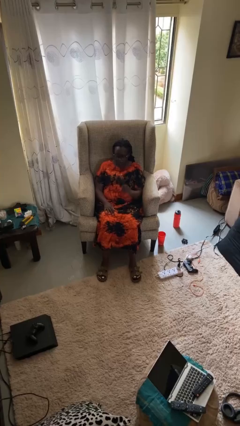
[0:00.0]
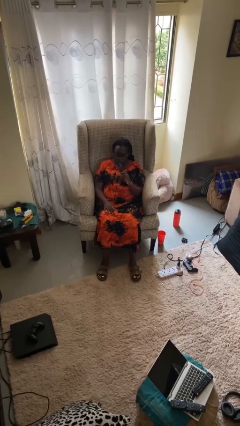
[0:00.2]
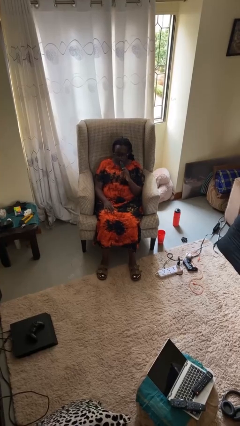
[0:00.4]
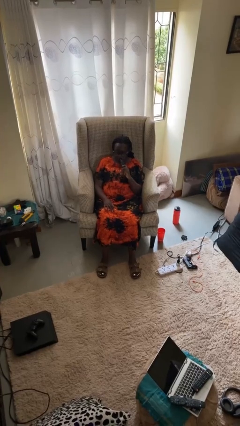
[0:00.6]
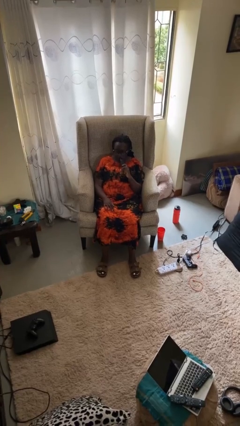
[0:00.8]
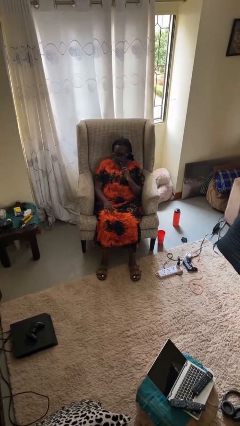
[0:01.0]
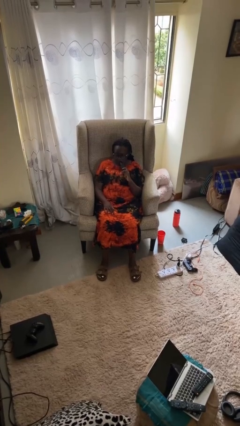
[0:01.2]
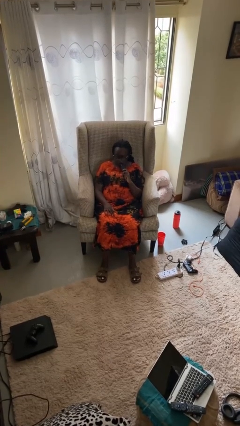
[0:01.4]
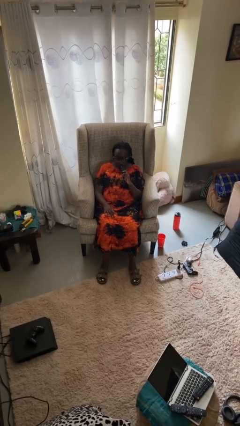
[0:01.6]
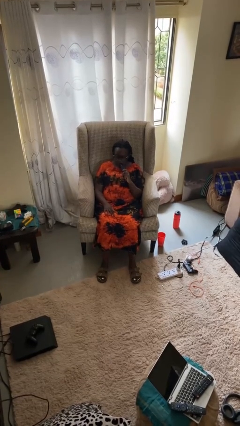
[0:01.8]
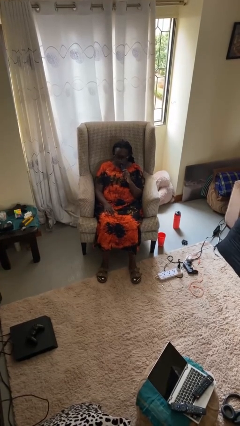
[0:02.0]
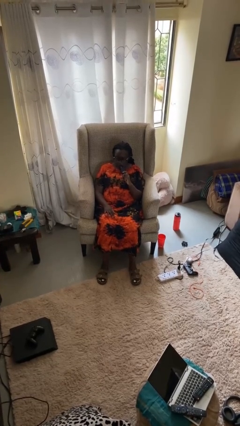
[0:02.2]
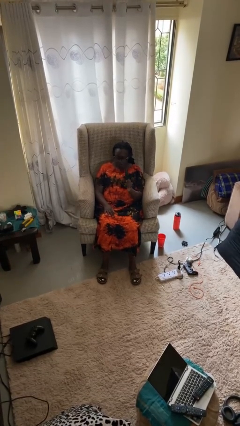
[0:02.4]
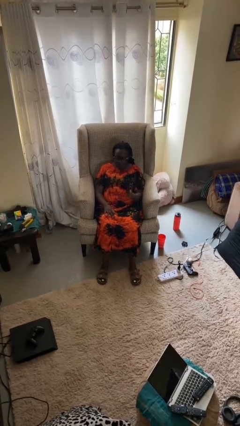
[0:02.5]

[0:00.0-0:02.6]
person vapes

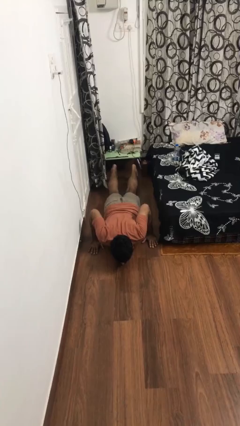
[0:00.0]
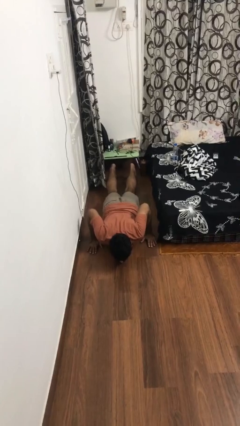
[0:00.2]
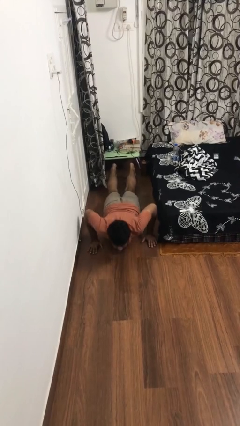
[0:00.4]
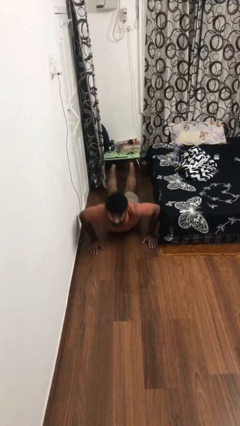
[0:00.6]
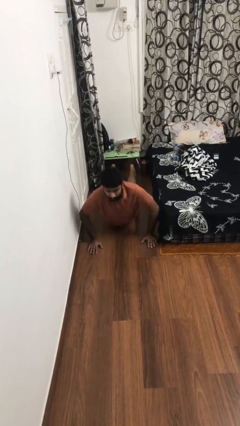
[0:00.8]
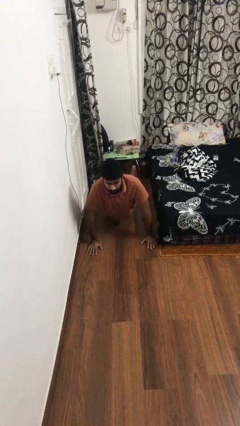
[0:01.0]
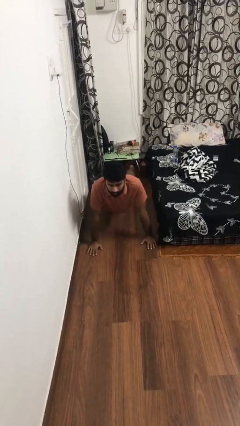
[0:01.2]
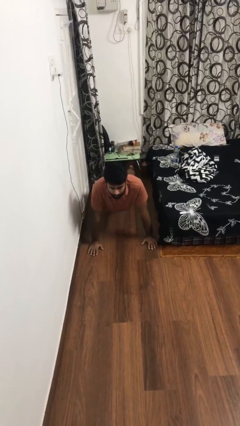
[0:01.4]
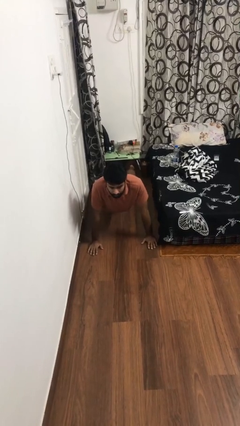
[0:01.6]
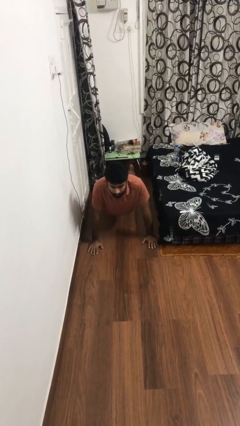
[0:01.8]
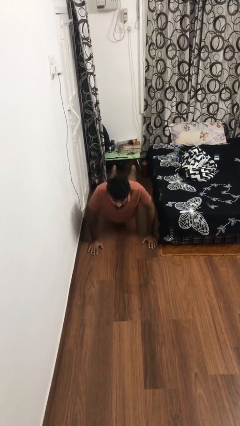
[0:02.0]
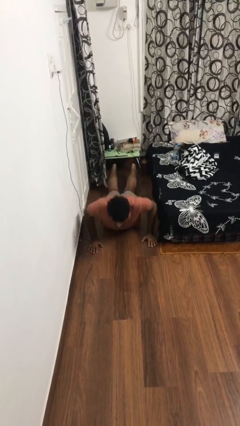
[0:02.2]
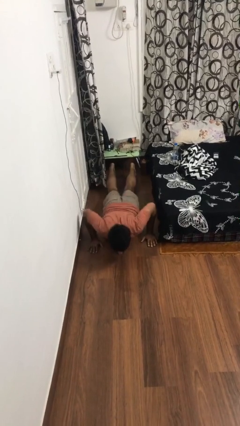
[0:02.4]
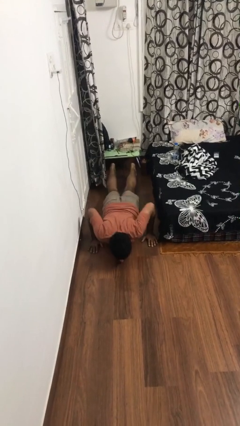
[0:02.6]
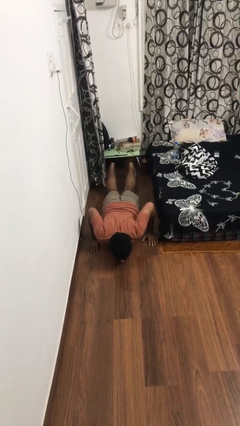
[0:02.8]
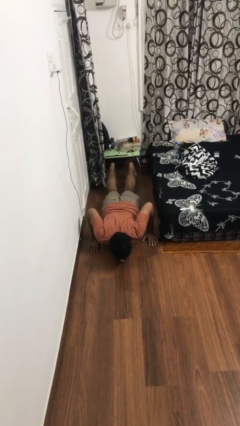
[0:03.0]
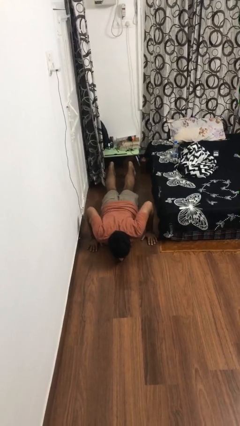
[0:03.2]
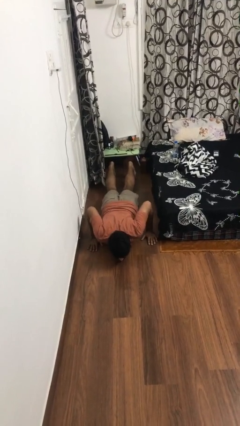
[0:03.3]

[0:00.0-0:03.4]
person exercises with pushup

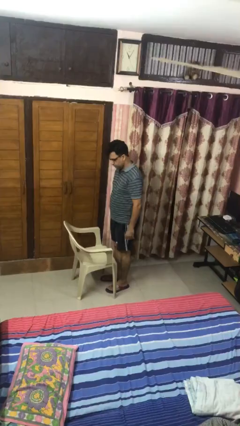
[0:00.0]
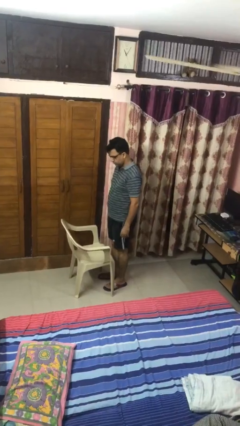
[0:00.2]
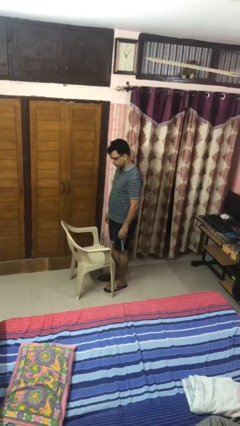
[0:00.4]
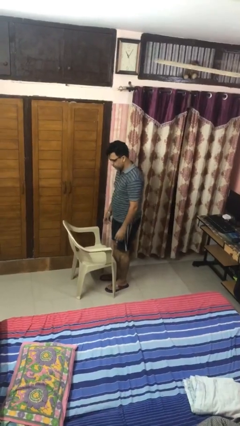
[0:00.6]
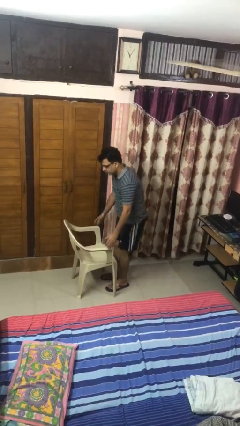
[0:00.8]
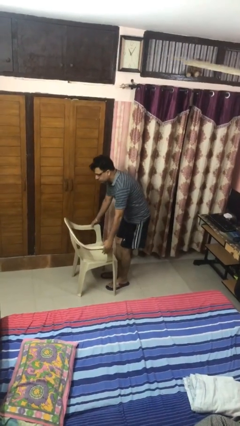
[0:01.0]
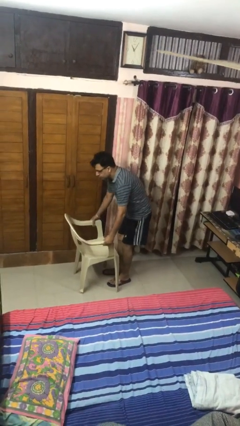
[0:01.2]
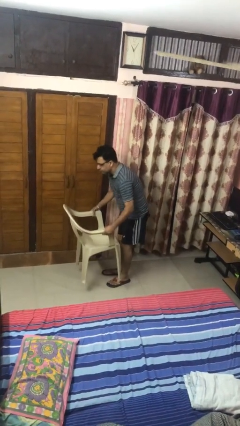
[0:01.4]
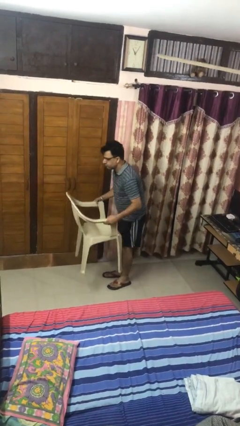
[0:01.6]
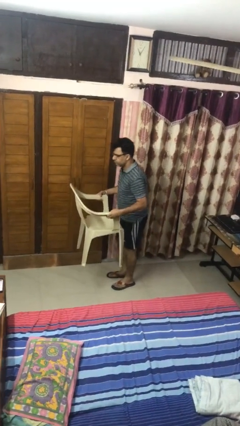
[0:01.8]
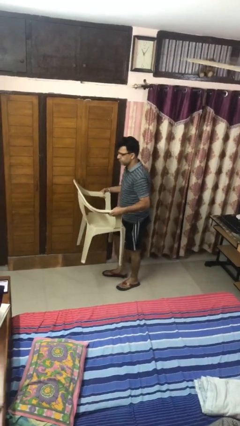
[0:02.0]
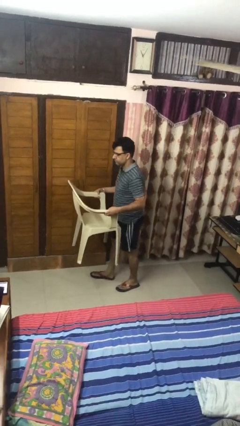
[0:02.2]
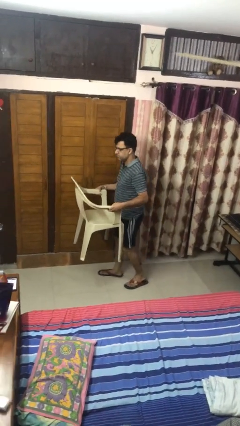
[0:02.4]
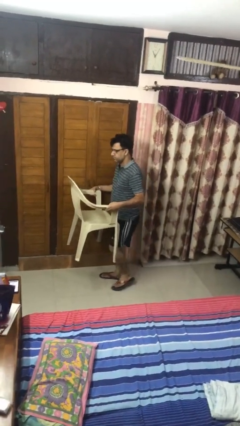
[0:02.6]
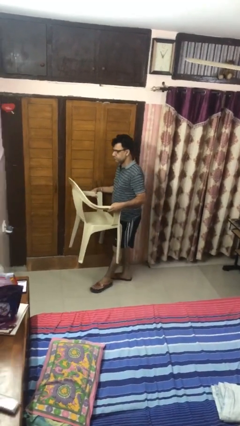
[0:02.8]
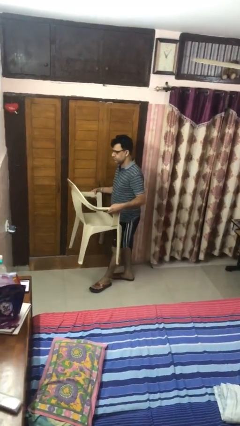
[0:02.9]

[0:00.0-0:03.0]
person carries furniture

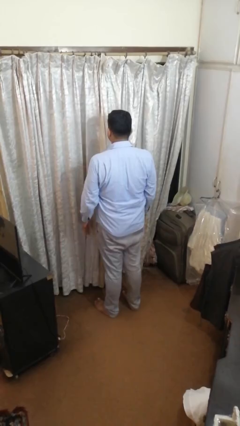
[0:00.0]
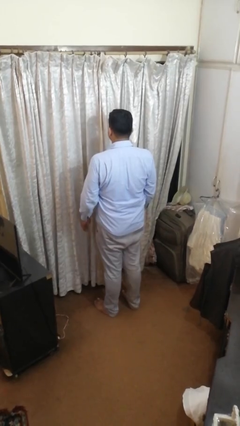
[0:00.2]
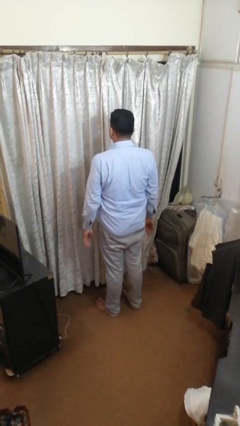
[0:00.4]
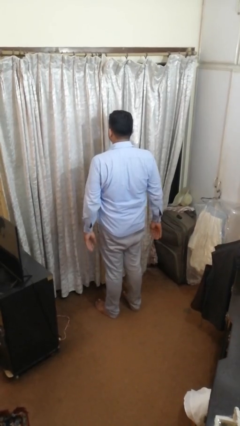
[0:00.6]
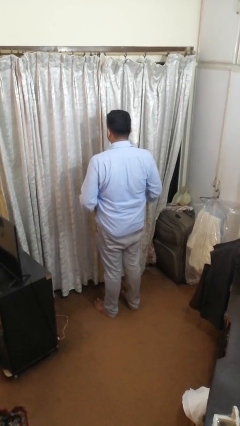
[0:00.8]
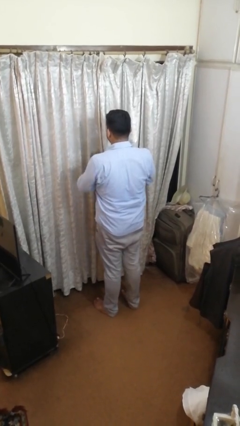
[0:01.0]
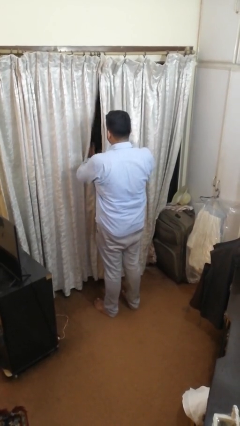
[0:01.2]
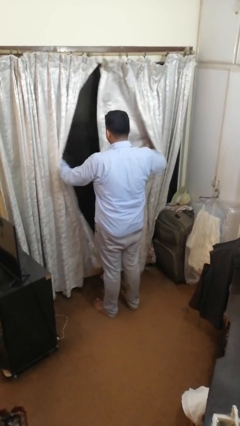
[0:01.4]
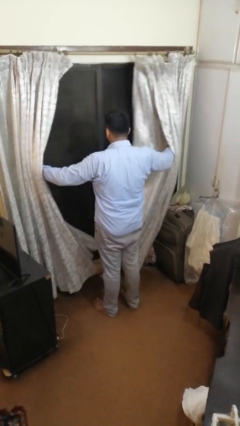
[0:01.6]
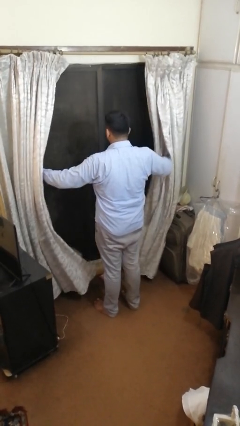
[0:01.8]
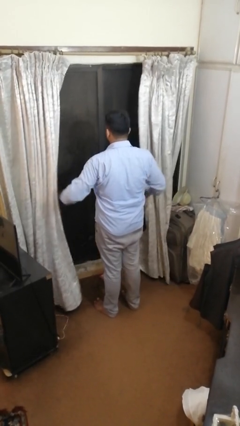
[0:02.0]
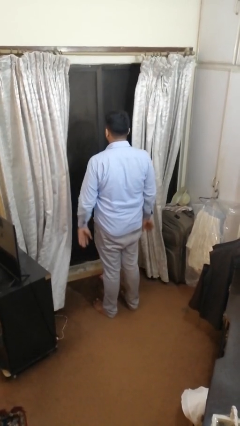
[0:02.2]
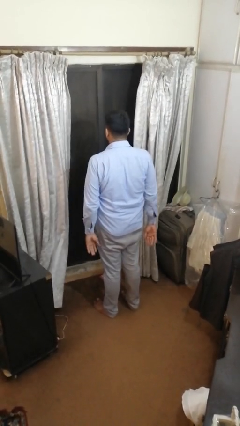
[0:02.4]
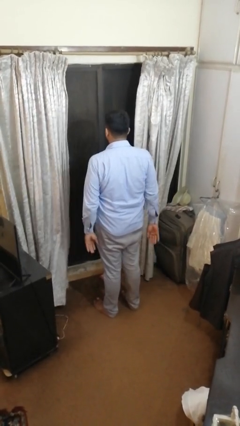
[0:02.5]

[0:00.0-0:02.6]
person opens curtains

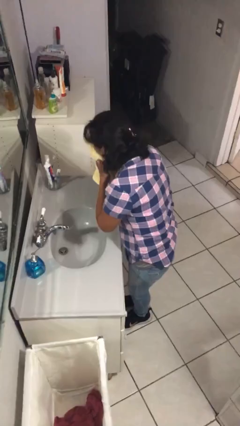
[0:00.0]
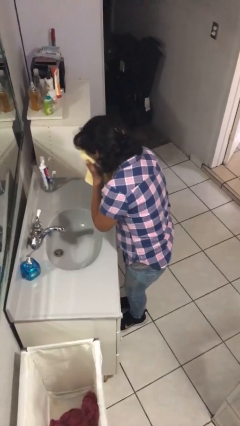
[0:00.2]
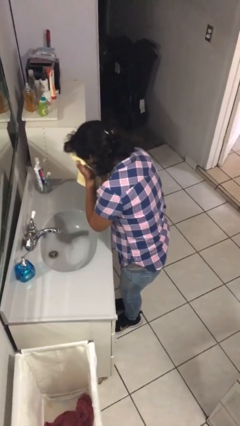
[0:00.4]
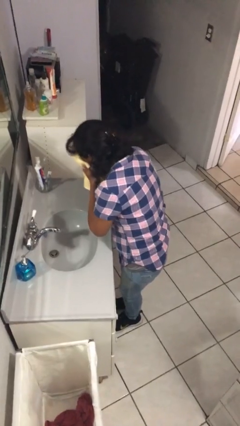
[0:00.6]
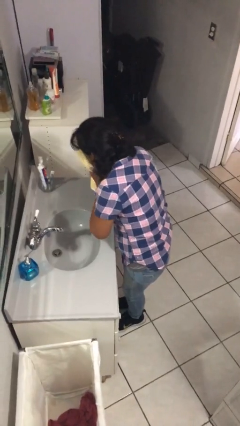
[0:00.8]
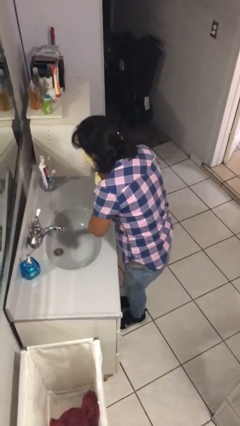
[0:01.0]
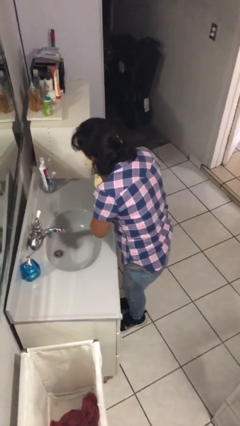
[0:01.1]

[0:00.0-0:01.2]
person dries face with towel

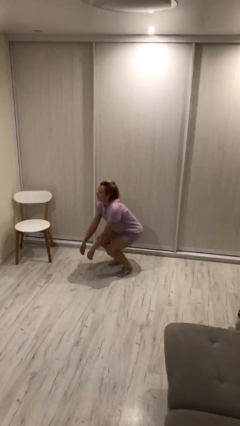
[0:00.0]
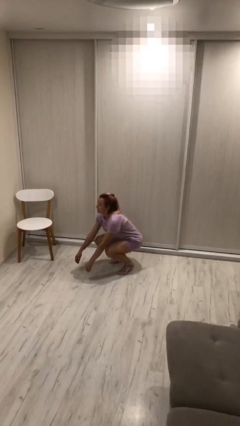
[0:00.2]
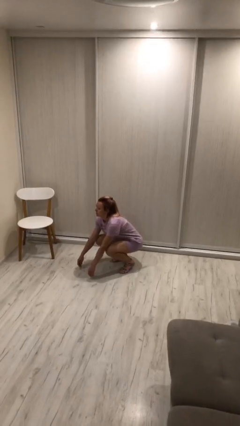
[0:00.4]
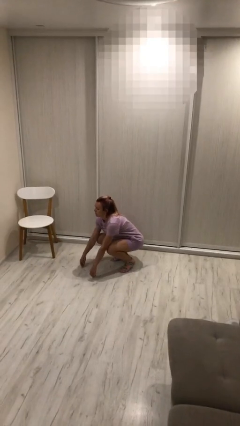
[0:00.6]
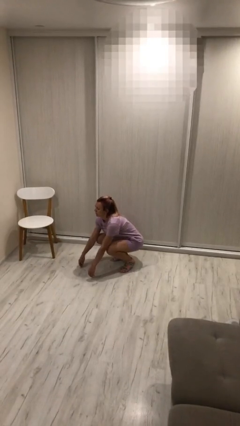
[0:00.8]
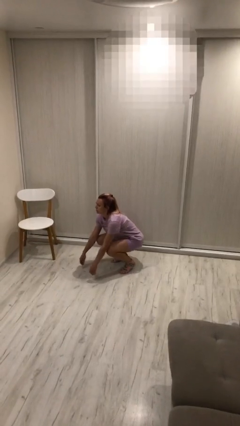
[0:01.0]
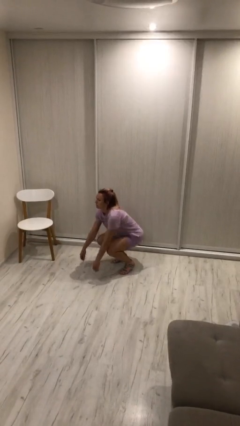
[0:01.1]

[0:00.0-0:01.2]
person stands up

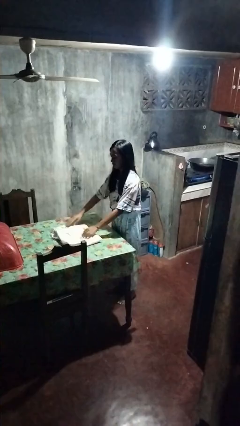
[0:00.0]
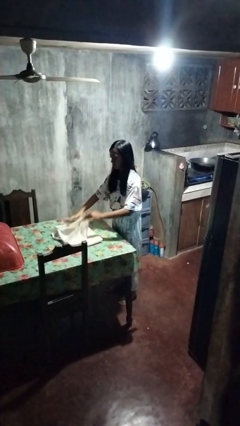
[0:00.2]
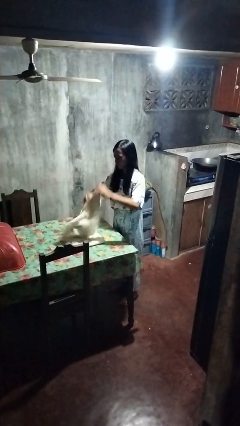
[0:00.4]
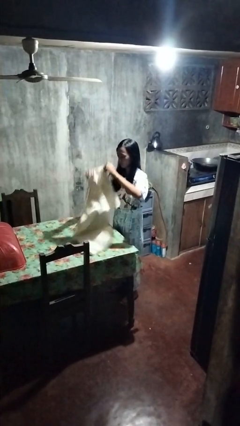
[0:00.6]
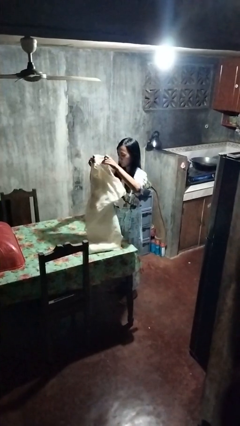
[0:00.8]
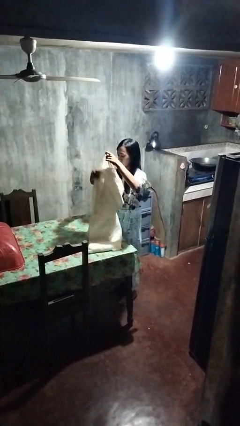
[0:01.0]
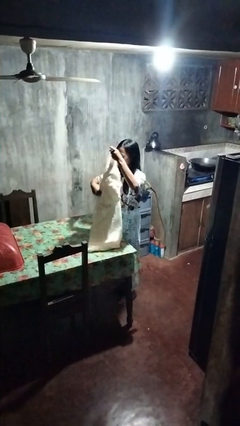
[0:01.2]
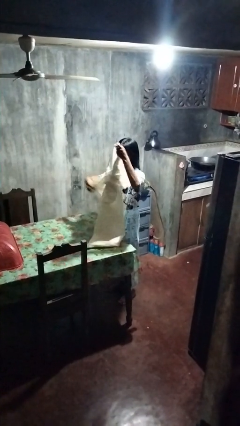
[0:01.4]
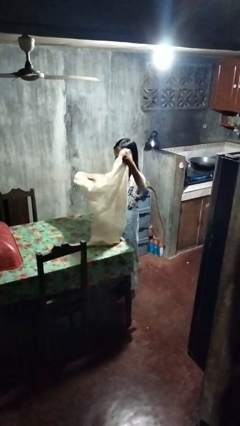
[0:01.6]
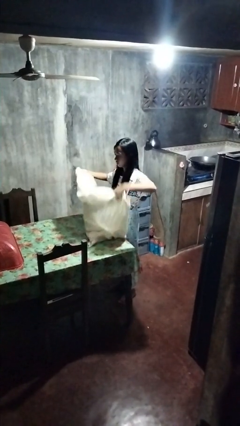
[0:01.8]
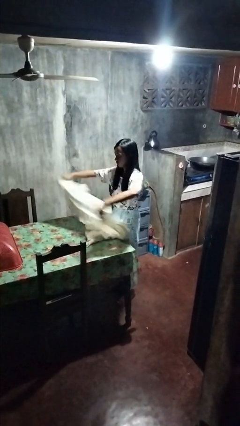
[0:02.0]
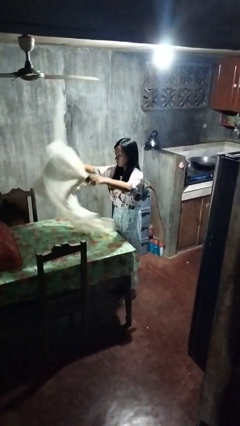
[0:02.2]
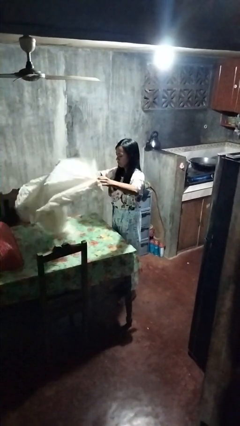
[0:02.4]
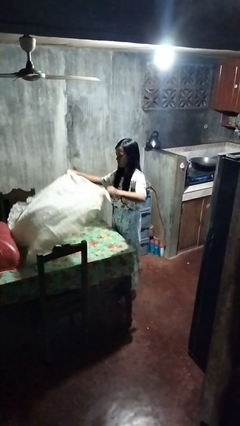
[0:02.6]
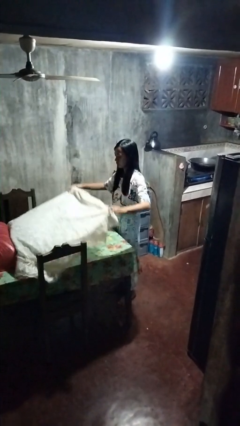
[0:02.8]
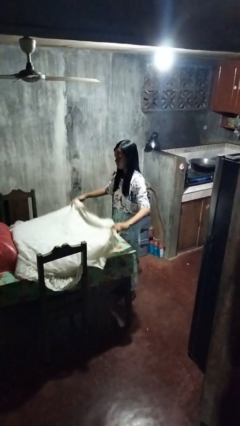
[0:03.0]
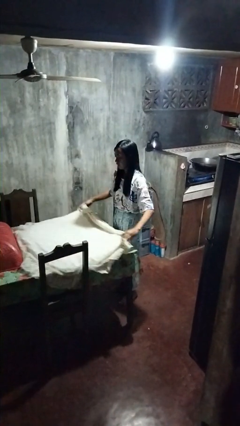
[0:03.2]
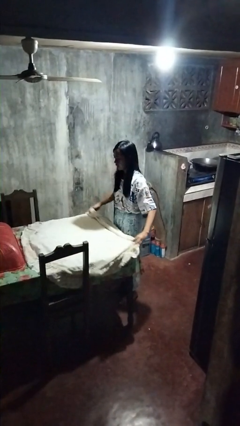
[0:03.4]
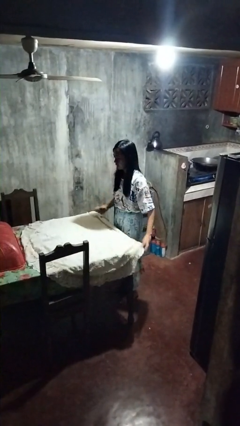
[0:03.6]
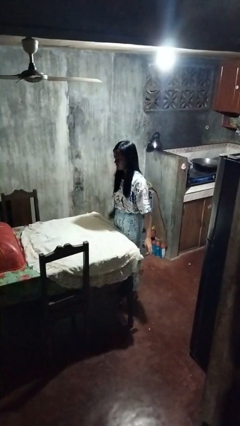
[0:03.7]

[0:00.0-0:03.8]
person spreads tablecloth
